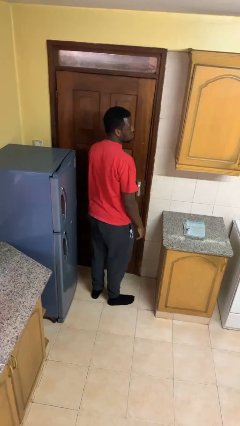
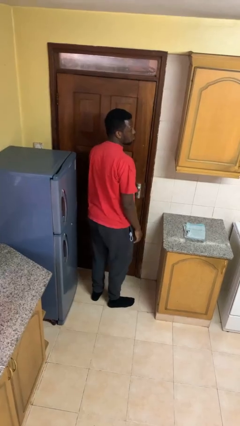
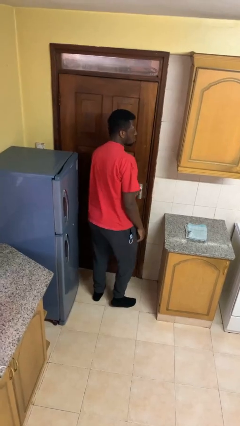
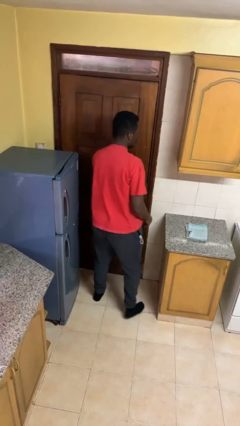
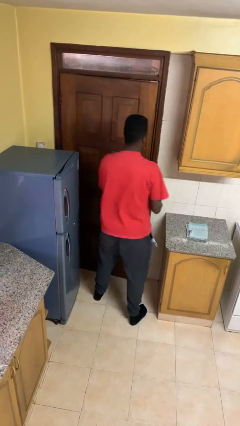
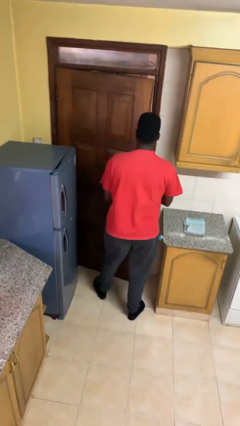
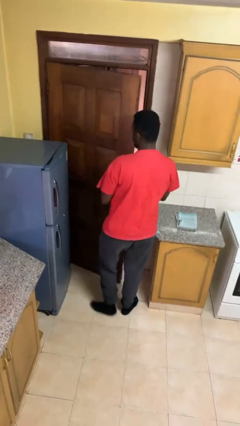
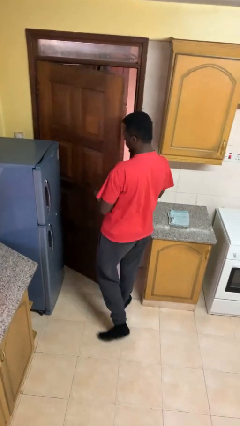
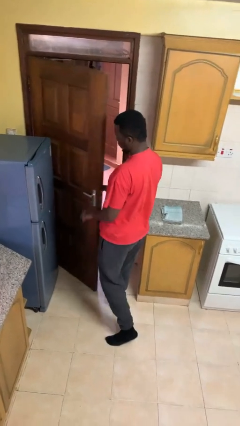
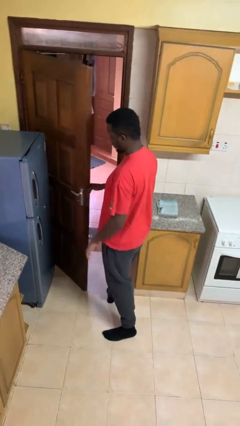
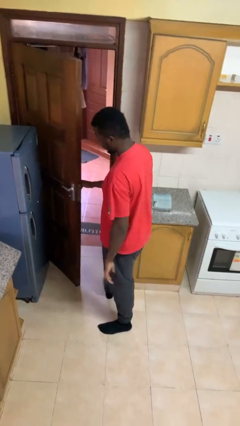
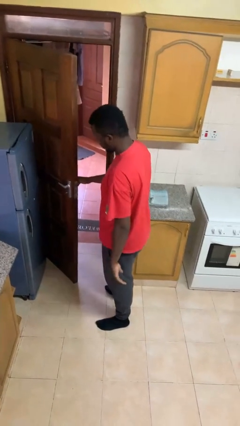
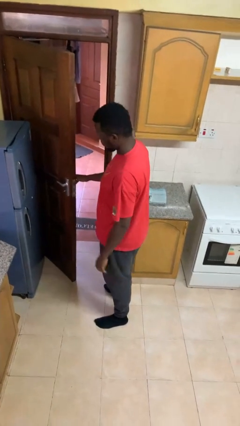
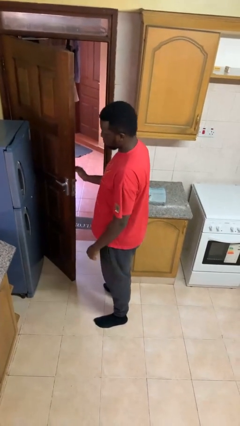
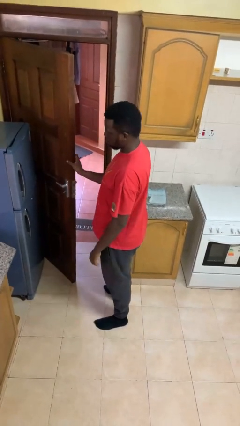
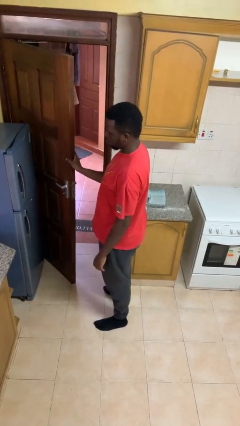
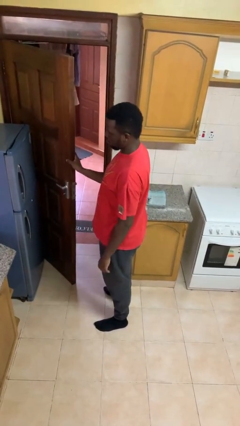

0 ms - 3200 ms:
person opens facility door

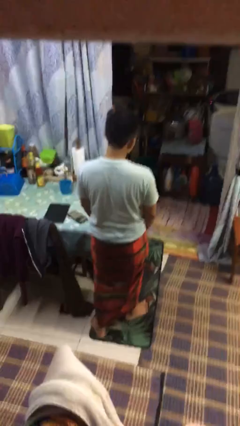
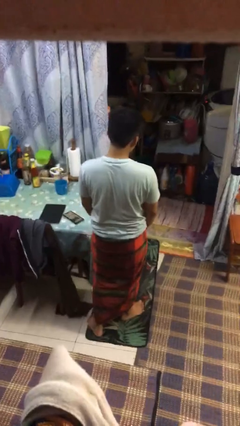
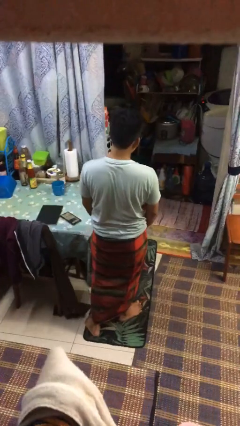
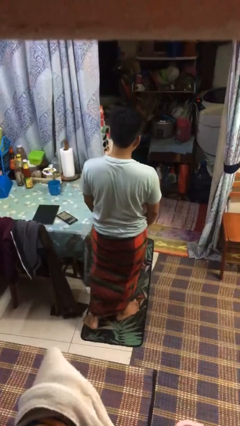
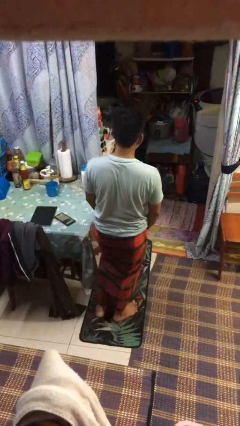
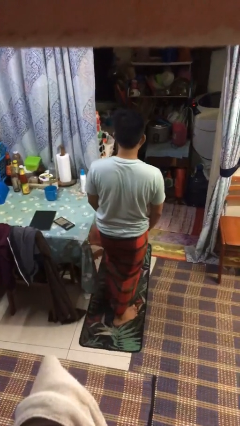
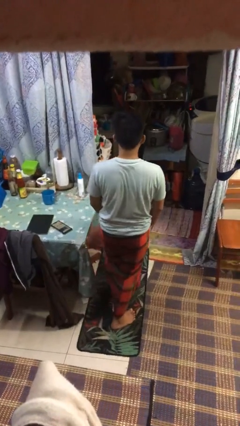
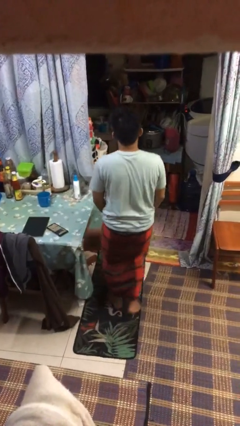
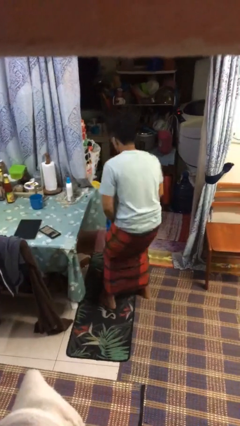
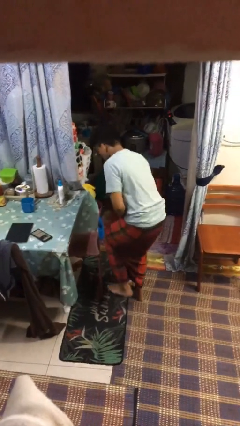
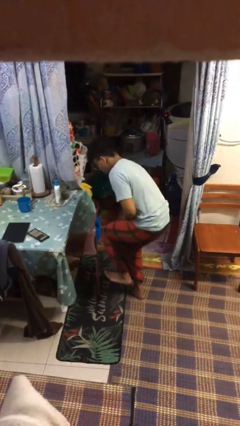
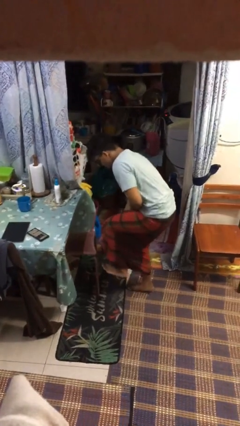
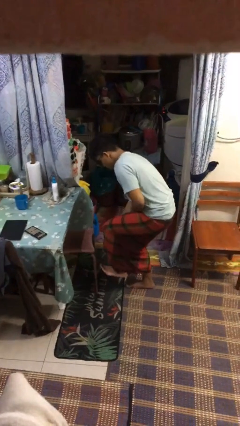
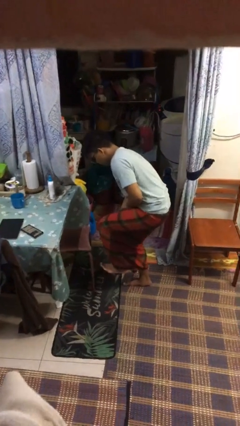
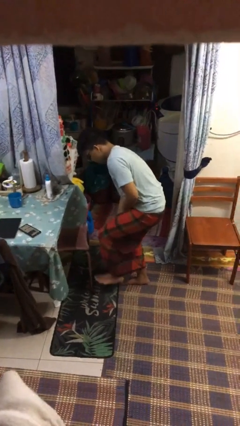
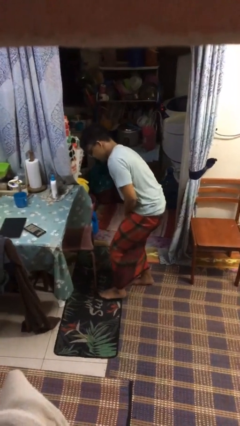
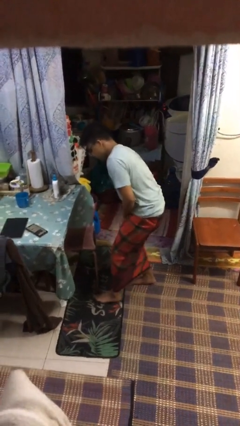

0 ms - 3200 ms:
person stubs toe

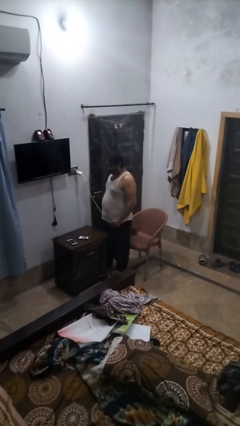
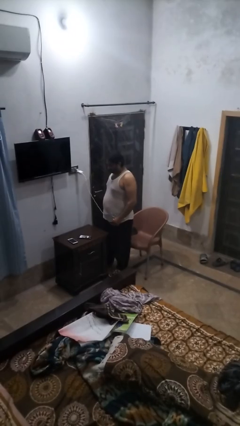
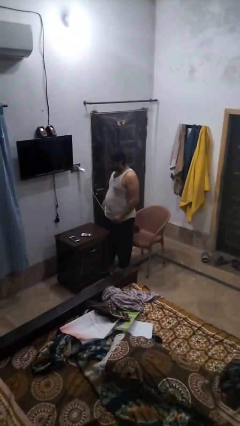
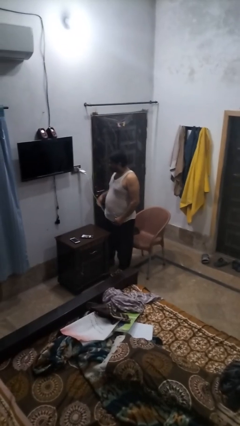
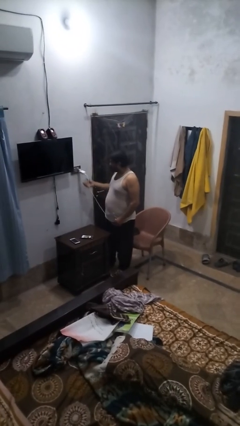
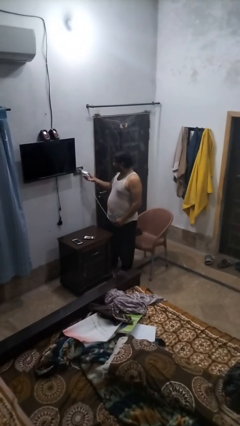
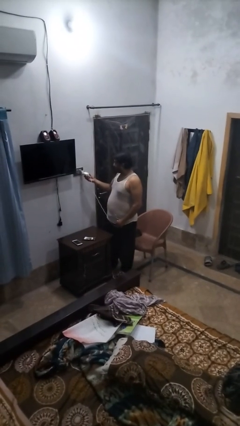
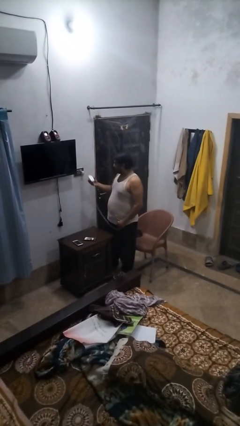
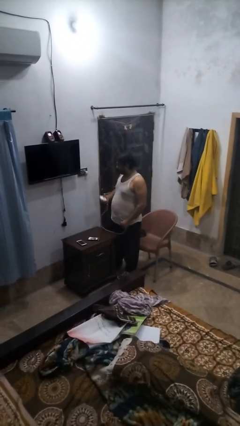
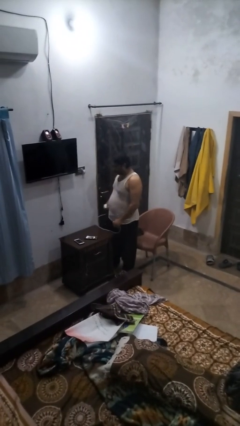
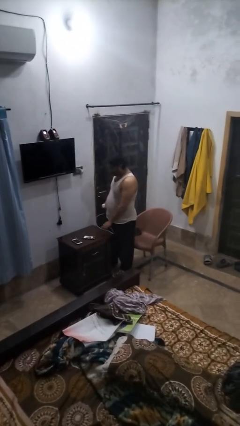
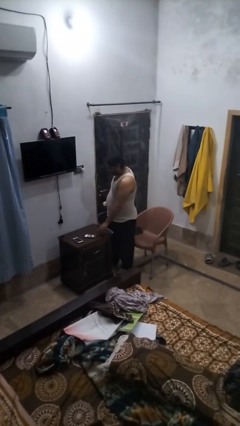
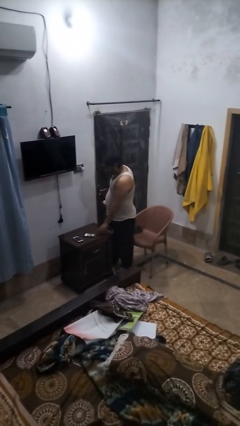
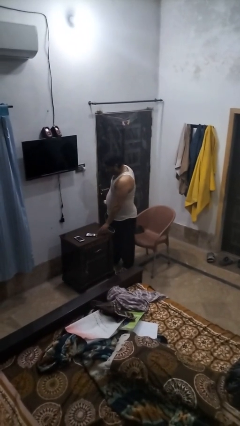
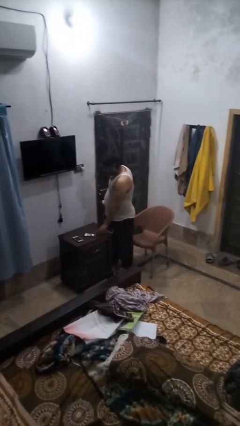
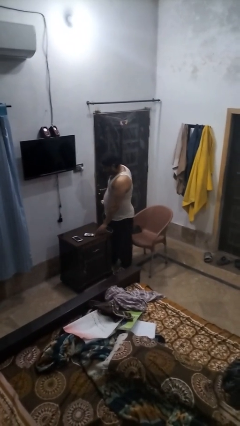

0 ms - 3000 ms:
person unplugs from electrical socket

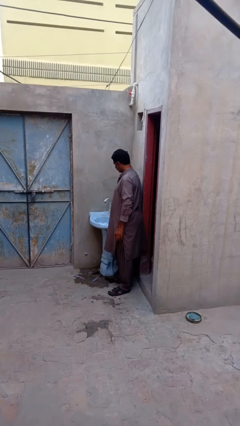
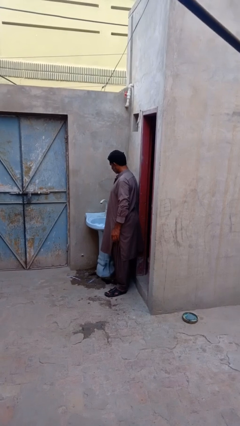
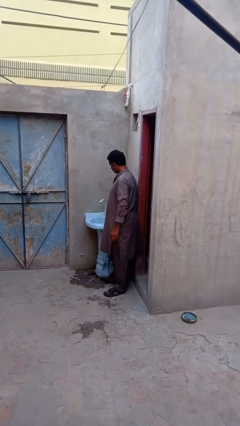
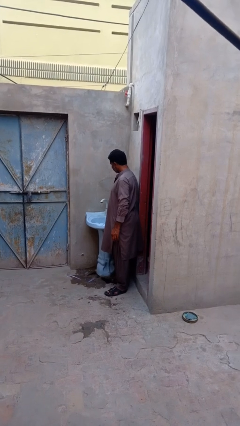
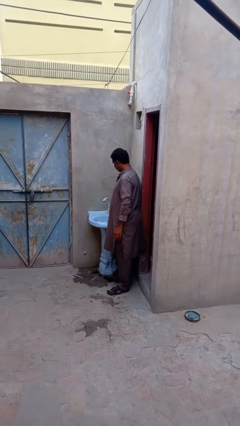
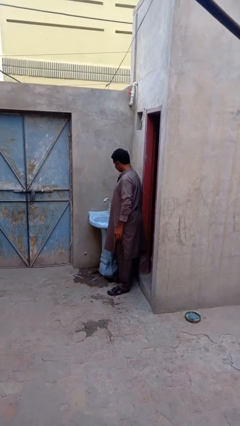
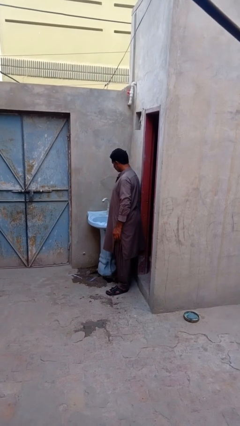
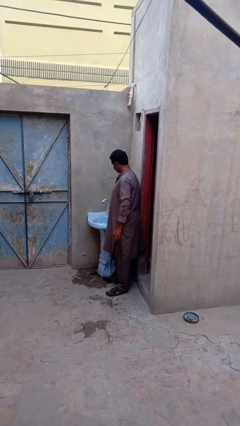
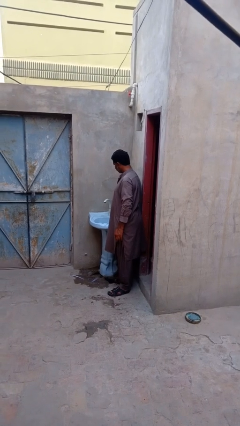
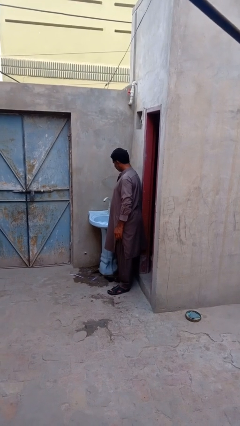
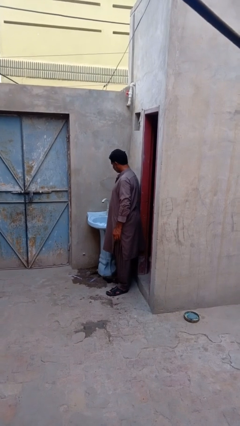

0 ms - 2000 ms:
person turns off faucet

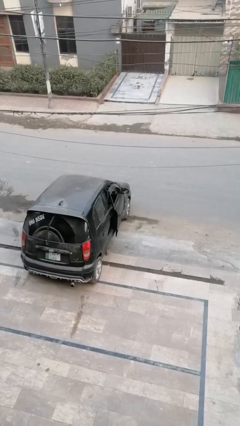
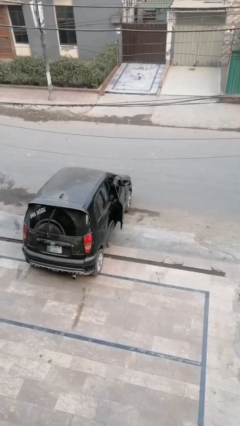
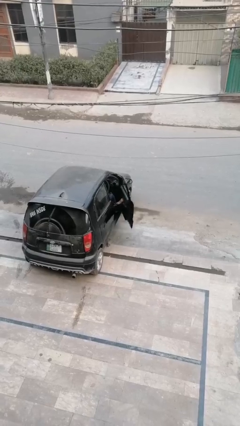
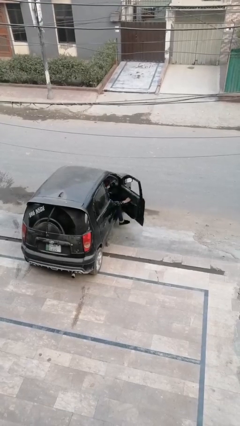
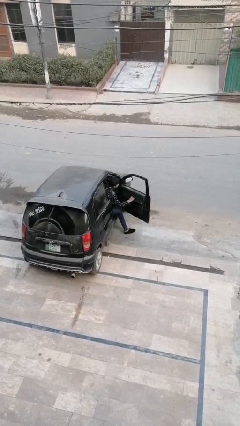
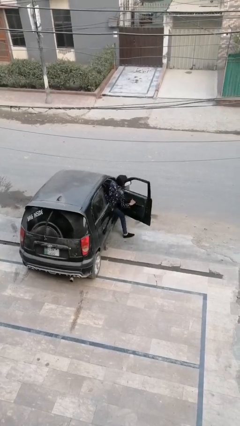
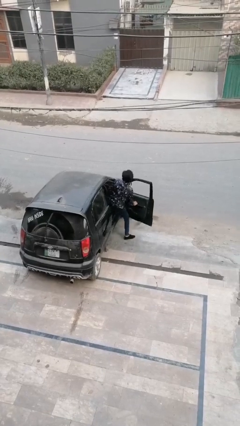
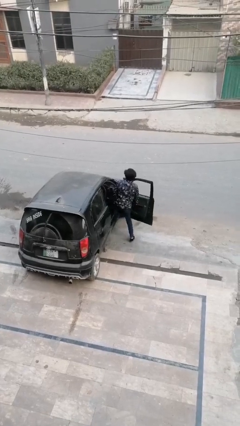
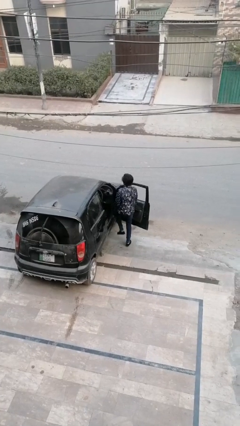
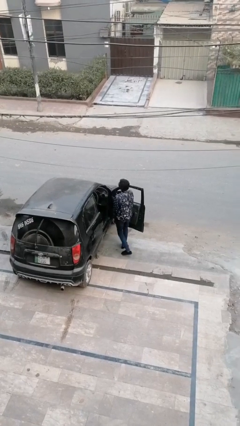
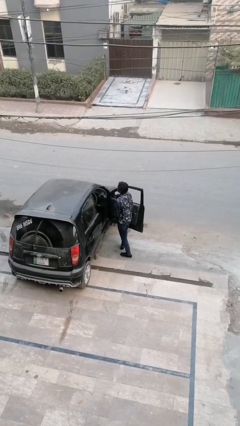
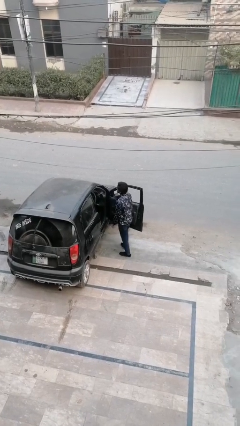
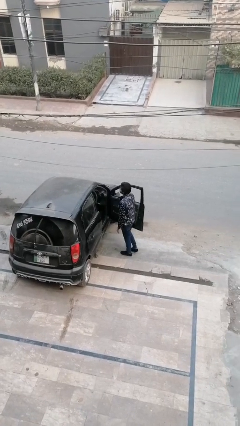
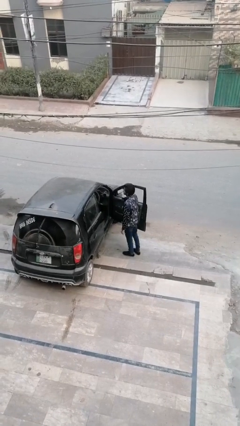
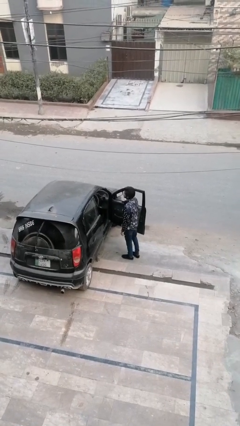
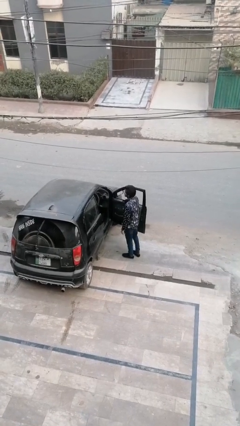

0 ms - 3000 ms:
person exits car

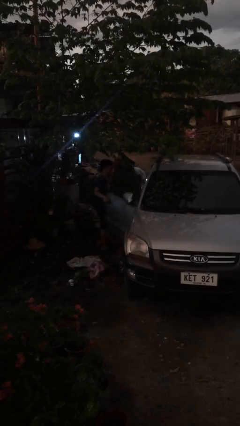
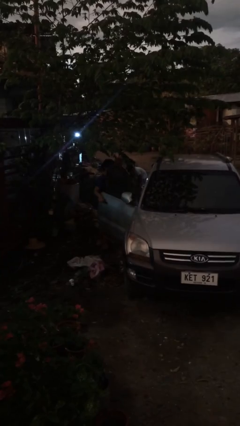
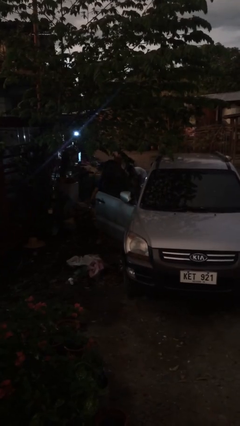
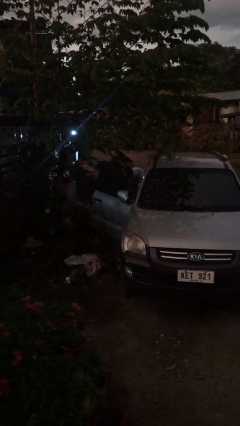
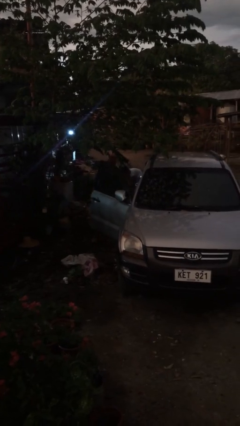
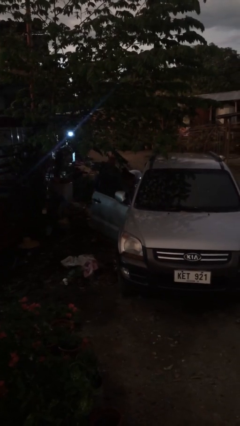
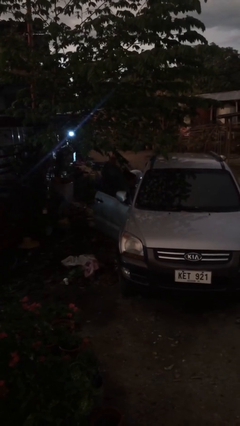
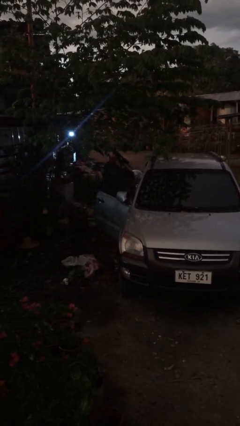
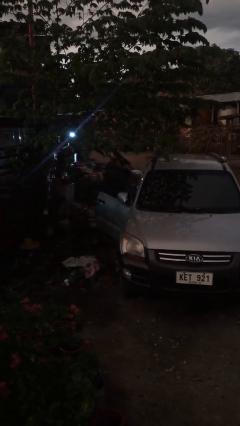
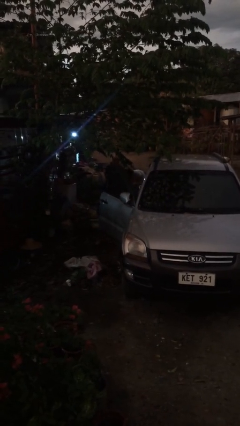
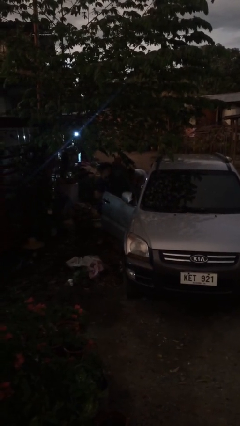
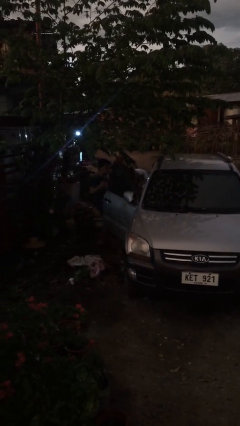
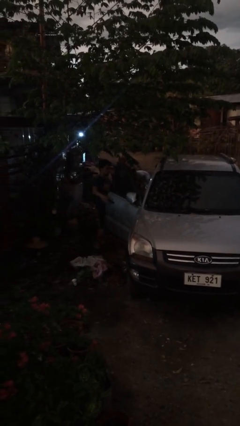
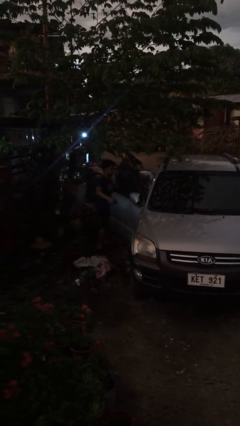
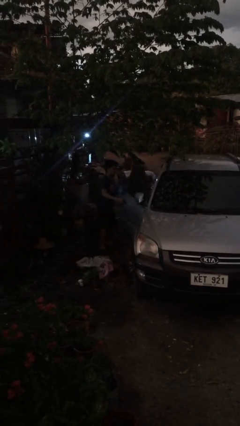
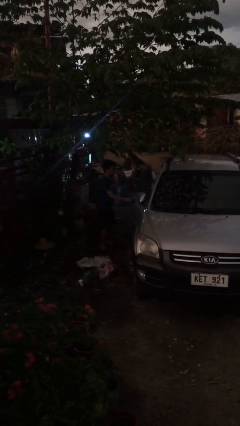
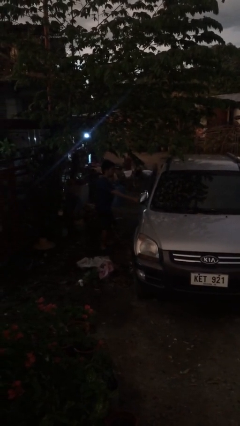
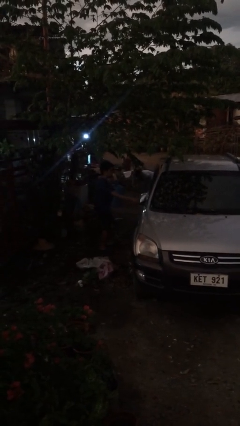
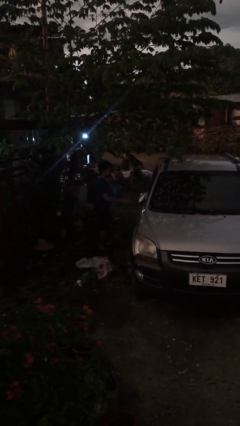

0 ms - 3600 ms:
person unloads car
